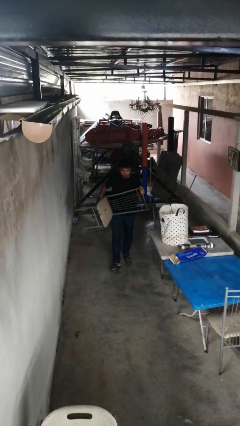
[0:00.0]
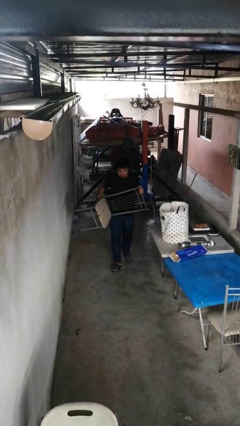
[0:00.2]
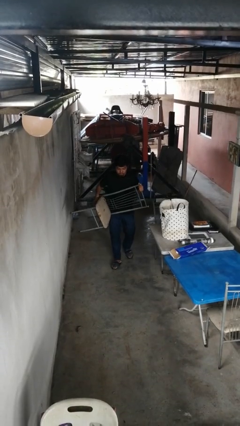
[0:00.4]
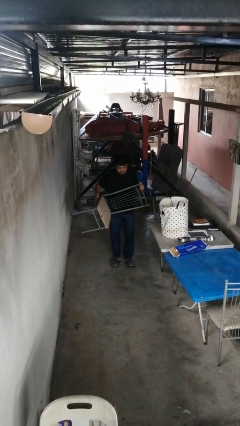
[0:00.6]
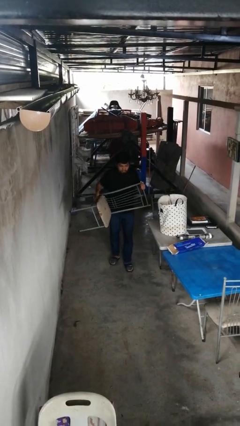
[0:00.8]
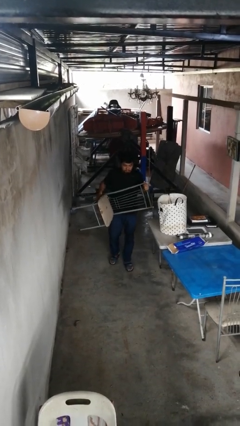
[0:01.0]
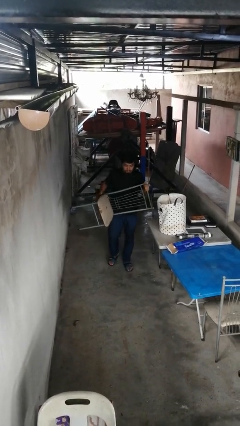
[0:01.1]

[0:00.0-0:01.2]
person carries furniture

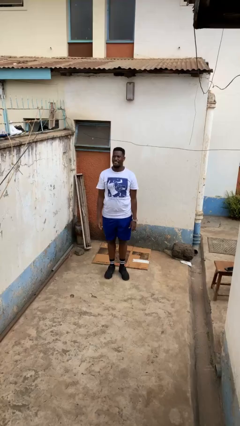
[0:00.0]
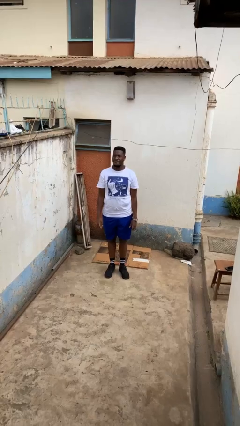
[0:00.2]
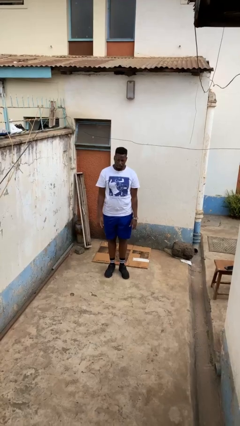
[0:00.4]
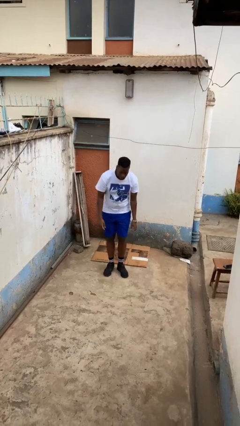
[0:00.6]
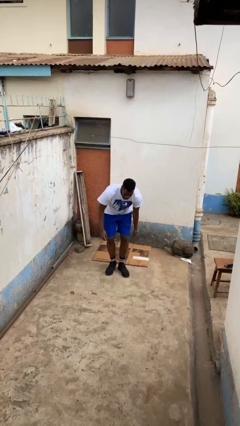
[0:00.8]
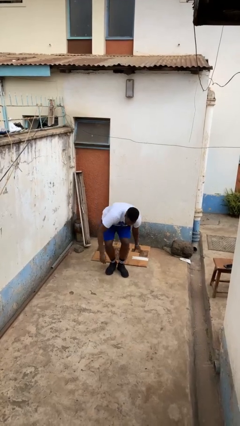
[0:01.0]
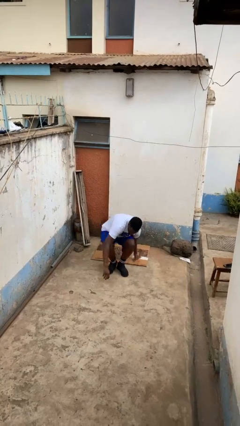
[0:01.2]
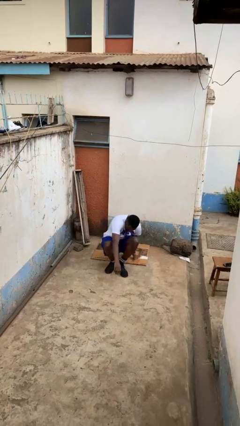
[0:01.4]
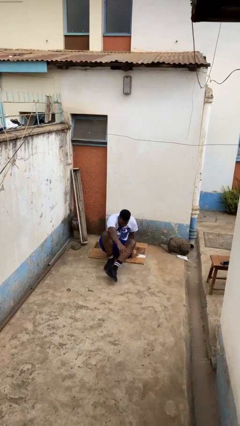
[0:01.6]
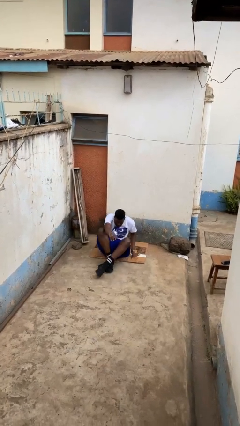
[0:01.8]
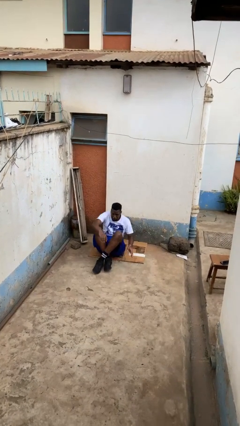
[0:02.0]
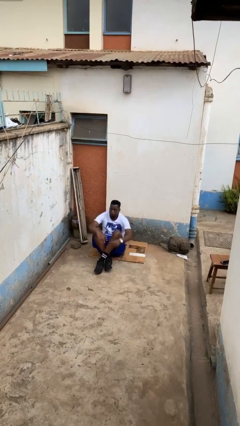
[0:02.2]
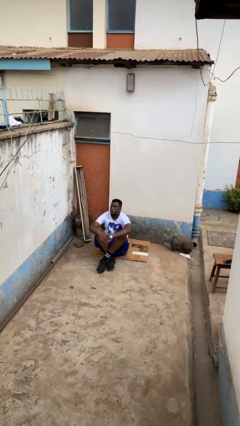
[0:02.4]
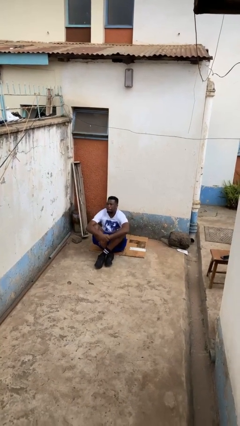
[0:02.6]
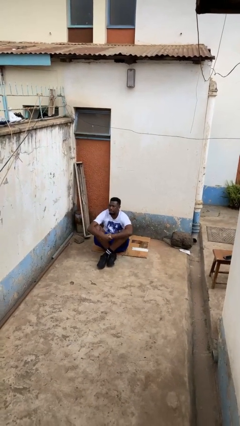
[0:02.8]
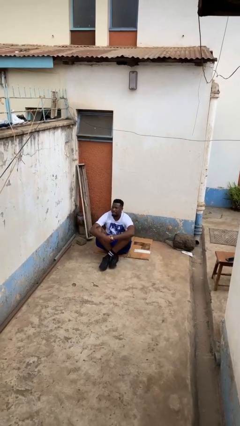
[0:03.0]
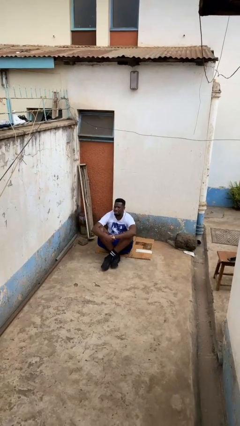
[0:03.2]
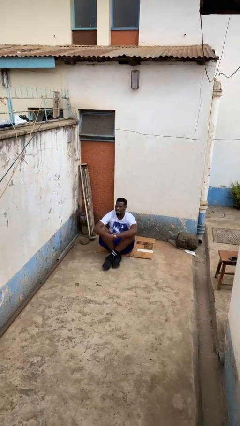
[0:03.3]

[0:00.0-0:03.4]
person sits crisscross

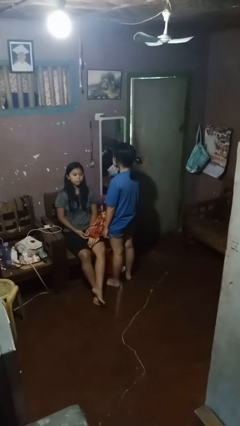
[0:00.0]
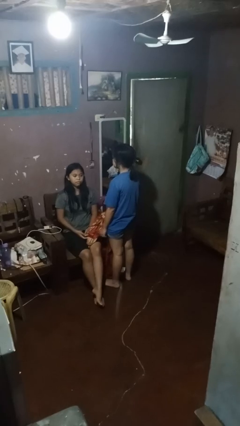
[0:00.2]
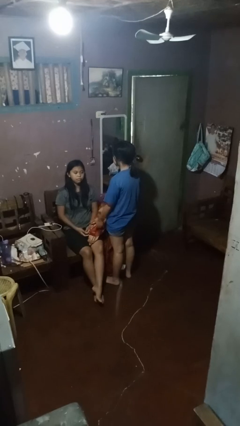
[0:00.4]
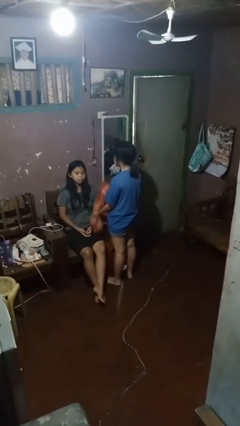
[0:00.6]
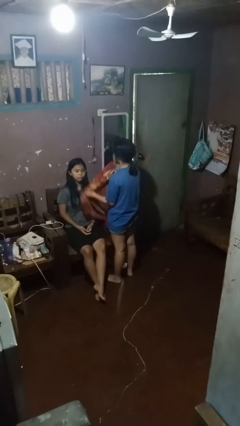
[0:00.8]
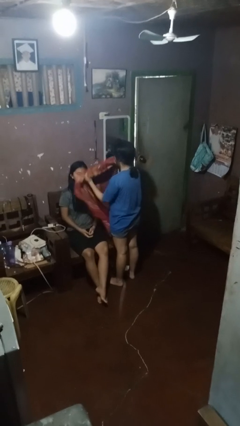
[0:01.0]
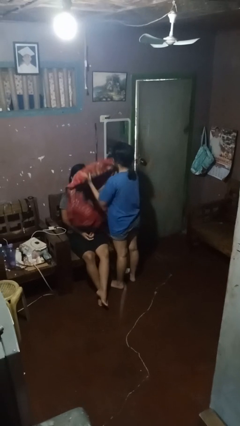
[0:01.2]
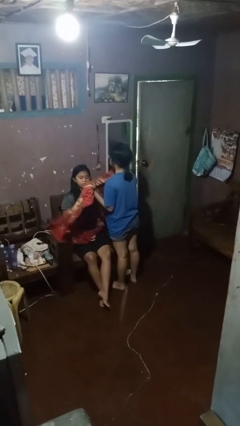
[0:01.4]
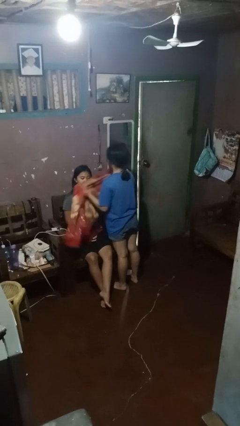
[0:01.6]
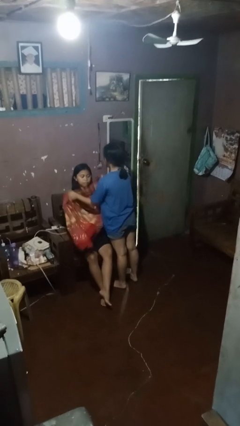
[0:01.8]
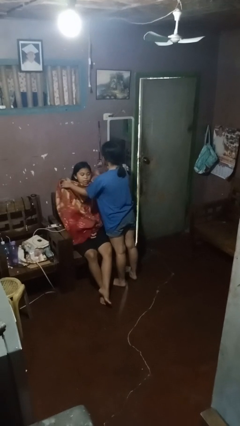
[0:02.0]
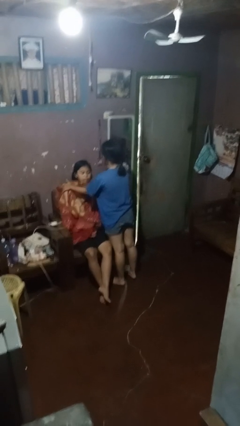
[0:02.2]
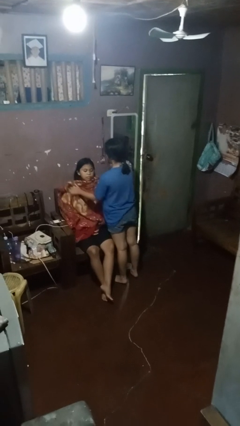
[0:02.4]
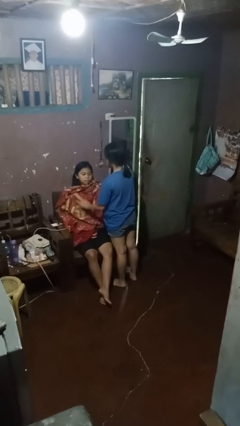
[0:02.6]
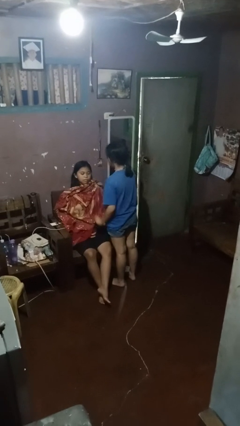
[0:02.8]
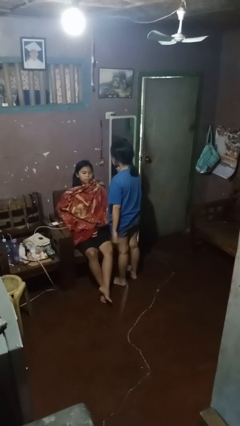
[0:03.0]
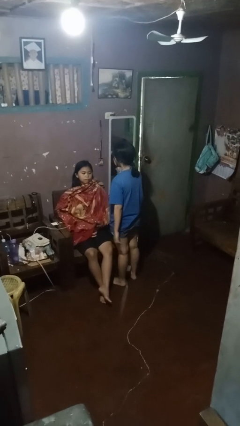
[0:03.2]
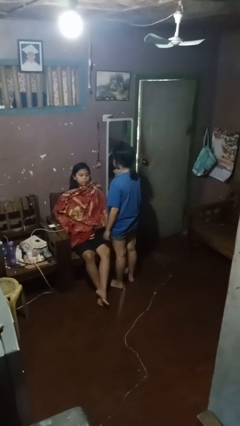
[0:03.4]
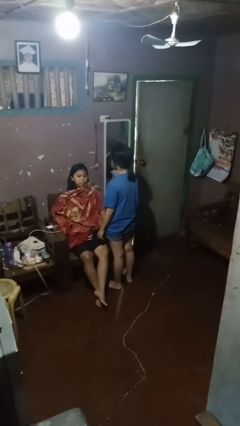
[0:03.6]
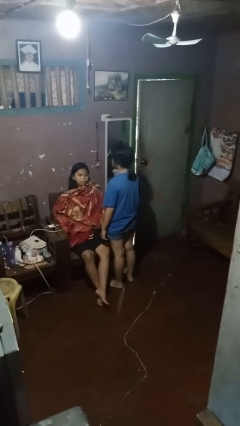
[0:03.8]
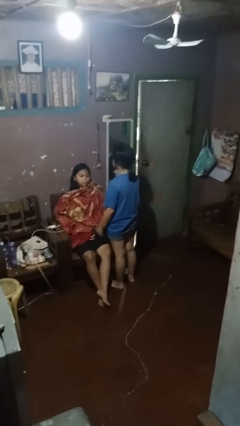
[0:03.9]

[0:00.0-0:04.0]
person covers friend with blanket

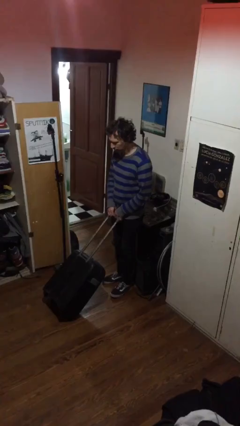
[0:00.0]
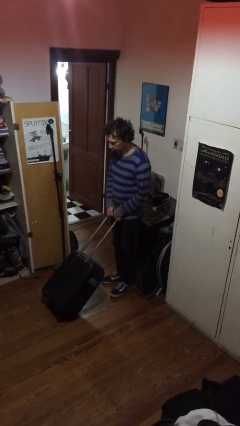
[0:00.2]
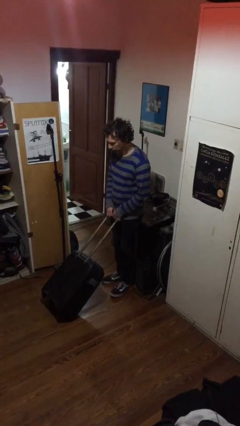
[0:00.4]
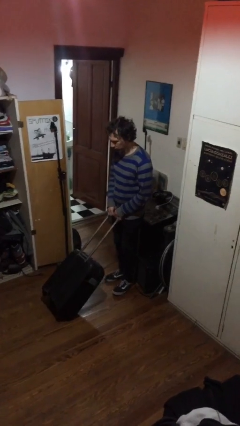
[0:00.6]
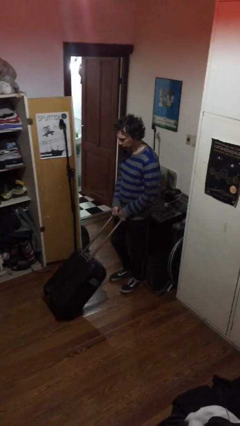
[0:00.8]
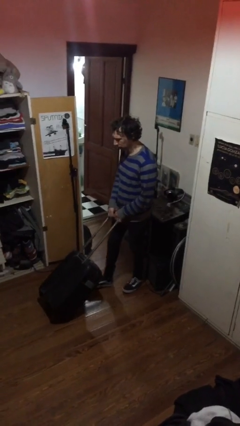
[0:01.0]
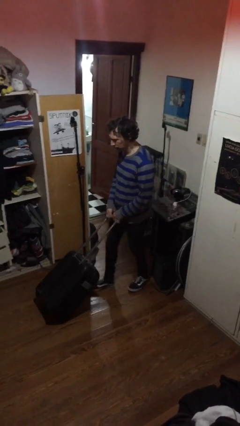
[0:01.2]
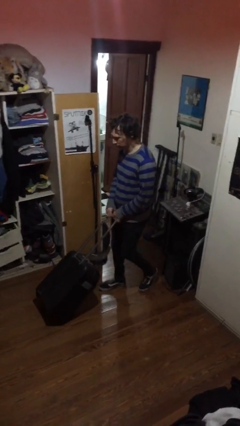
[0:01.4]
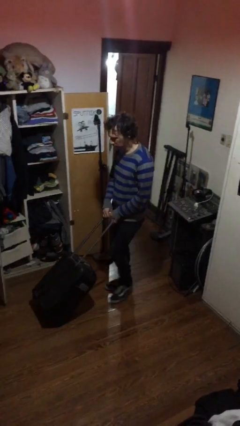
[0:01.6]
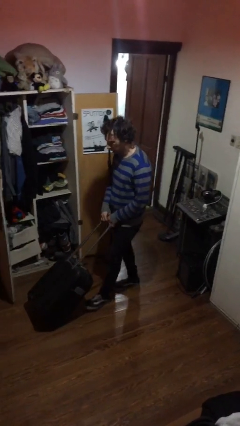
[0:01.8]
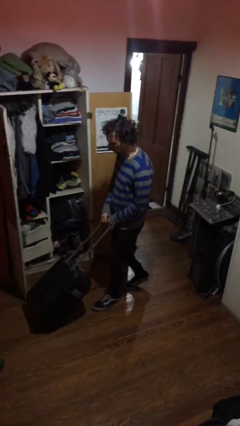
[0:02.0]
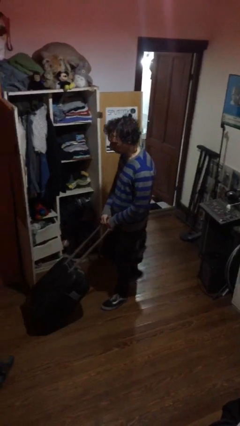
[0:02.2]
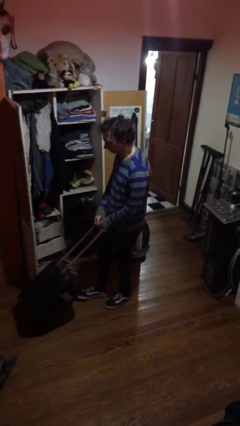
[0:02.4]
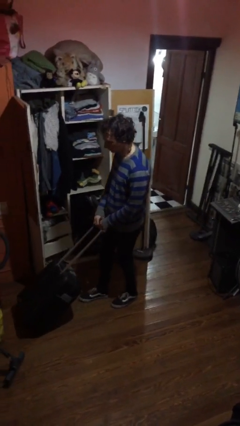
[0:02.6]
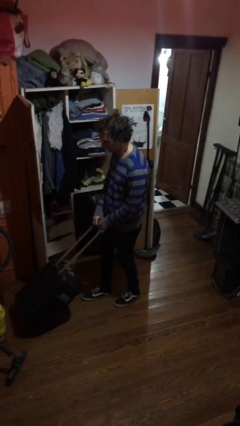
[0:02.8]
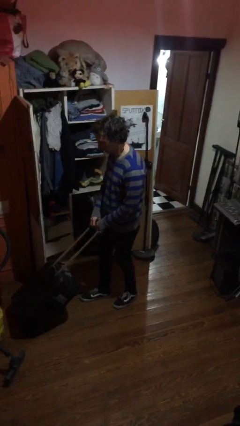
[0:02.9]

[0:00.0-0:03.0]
person pushes wheeled cart

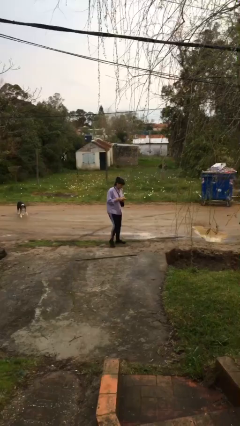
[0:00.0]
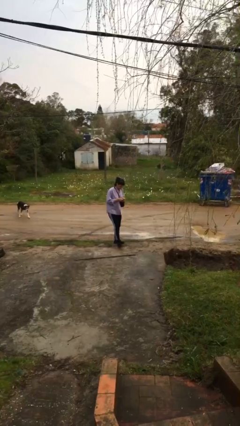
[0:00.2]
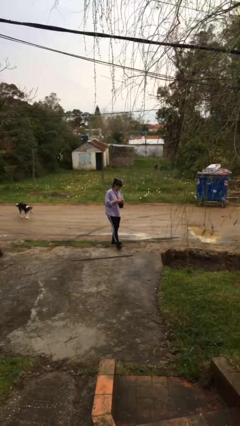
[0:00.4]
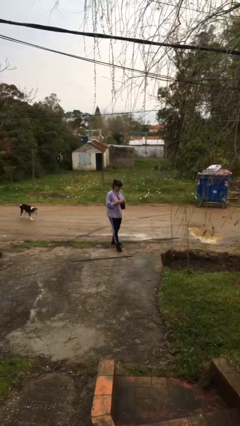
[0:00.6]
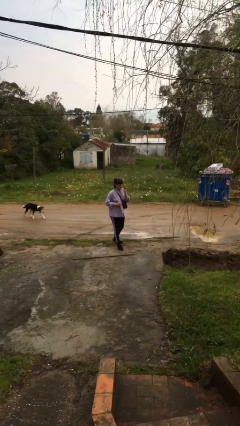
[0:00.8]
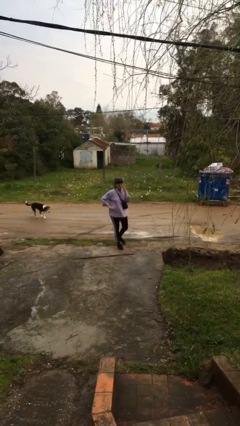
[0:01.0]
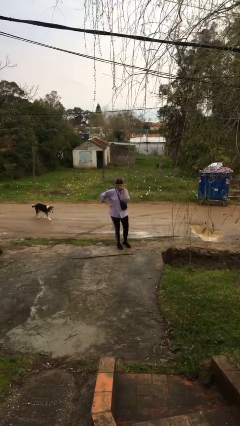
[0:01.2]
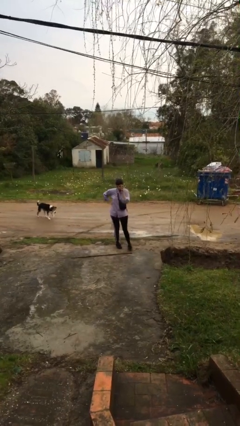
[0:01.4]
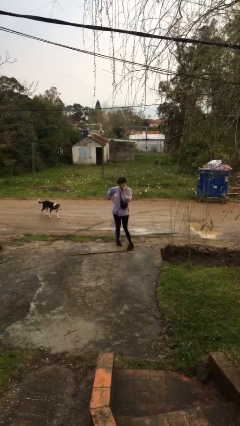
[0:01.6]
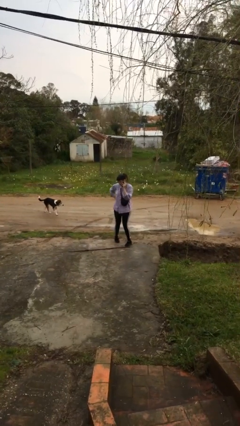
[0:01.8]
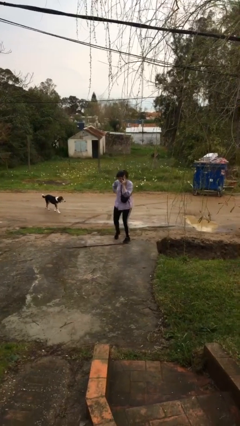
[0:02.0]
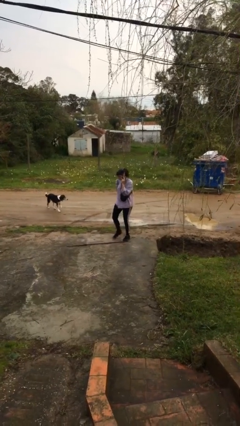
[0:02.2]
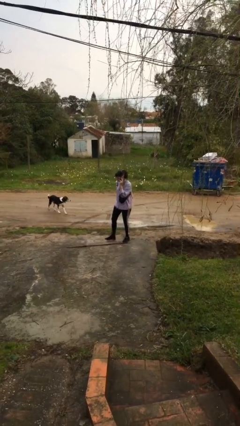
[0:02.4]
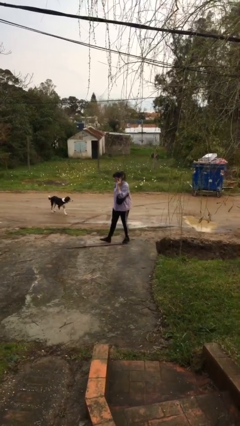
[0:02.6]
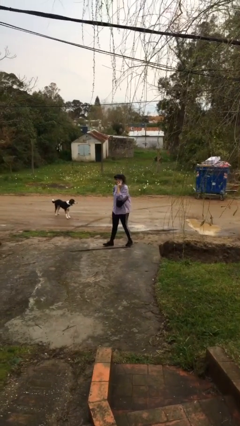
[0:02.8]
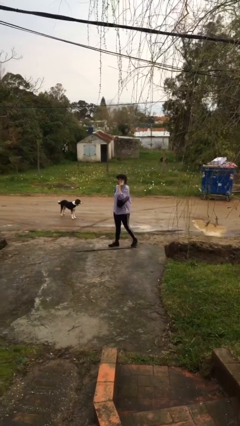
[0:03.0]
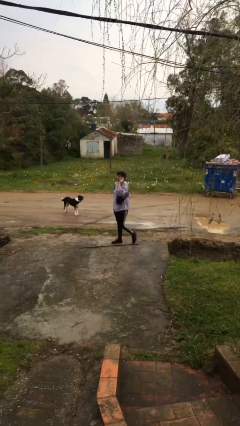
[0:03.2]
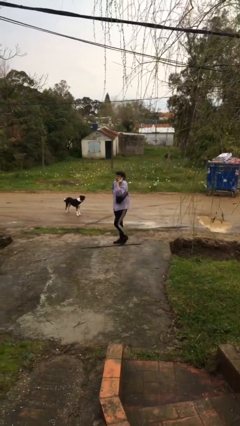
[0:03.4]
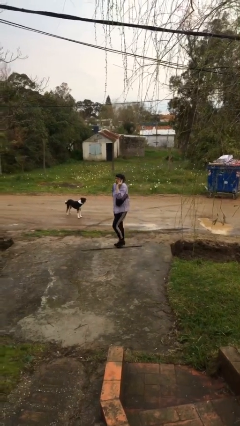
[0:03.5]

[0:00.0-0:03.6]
person talks on phone

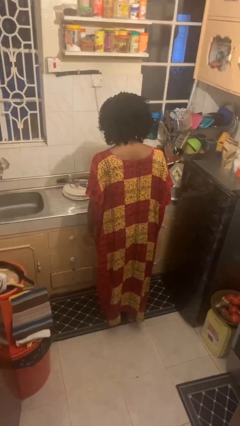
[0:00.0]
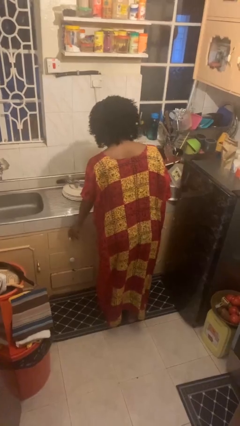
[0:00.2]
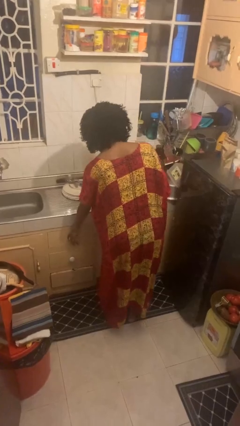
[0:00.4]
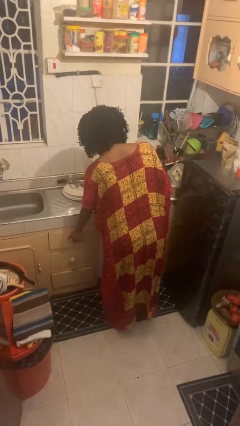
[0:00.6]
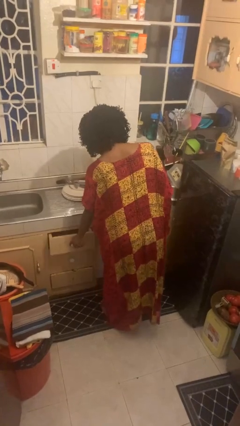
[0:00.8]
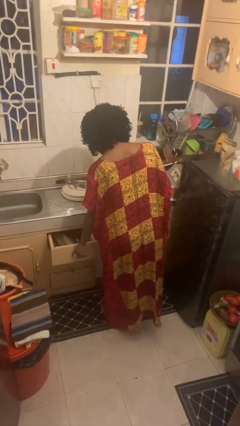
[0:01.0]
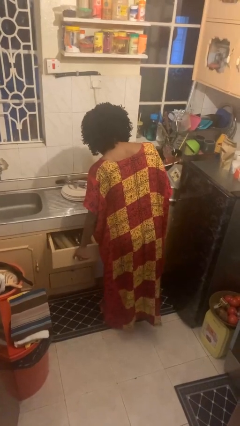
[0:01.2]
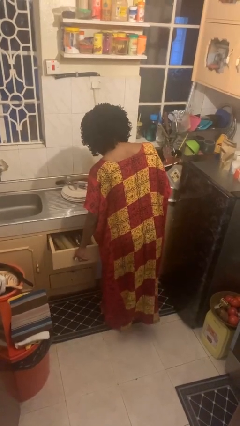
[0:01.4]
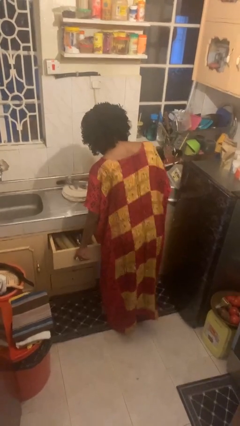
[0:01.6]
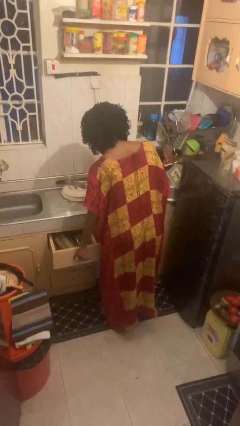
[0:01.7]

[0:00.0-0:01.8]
person opens kitchen drawer

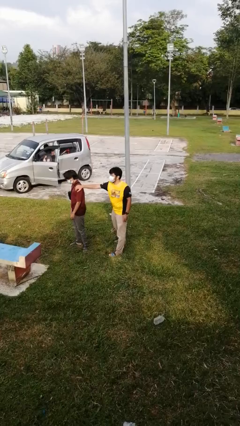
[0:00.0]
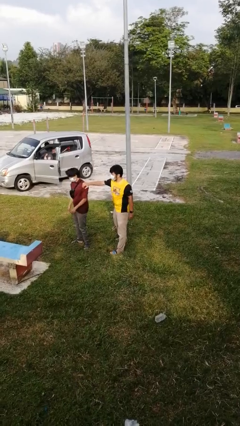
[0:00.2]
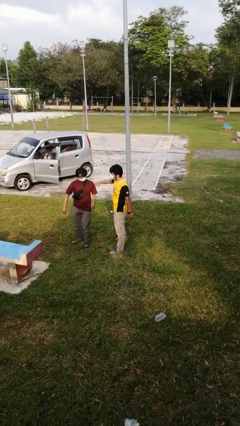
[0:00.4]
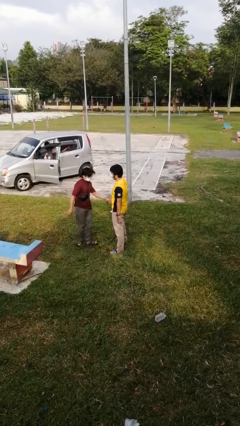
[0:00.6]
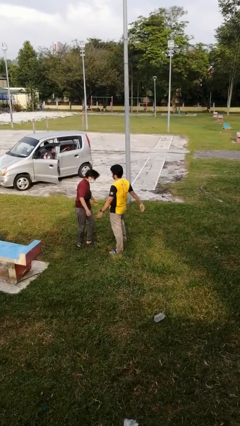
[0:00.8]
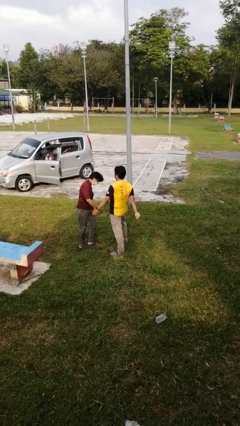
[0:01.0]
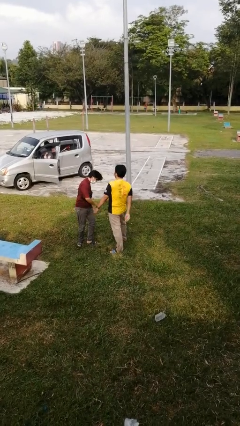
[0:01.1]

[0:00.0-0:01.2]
person spins person around
